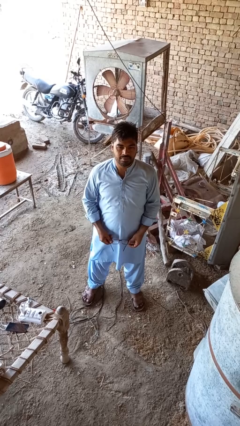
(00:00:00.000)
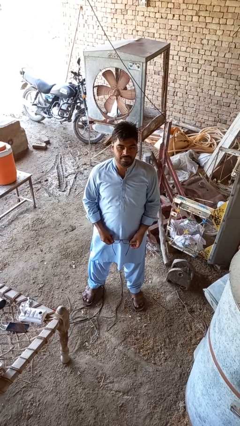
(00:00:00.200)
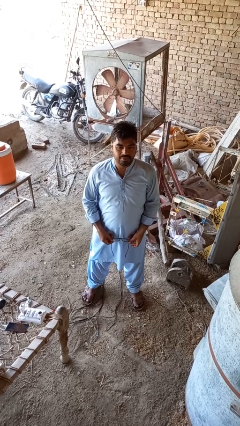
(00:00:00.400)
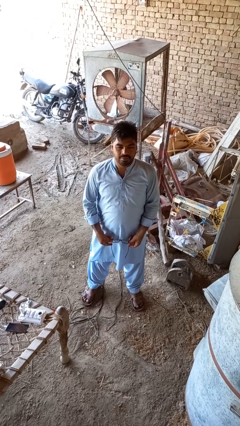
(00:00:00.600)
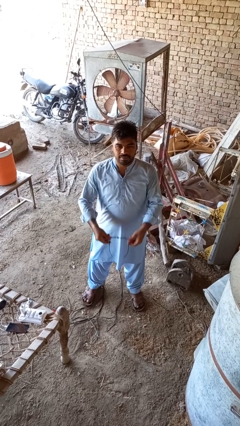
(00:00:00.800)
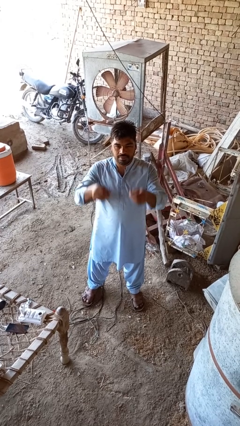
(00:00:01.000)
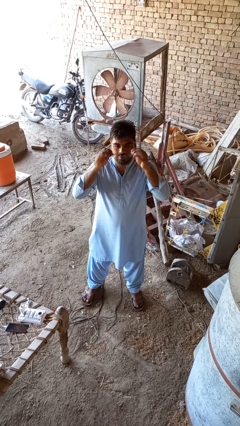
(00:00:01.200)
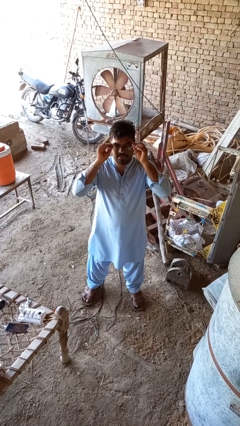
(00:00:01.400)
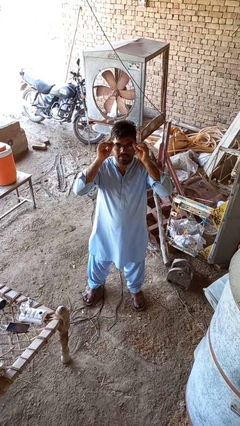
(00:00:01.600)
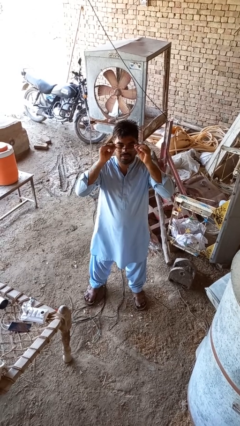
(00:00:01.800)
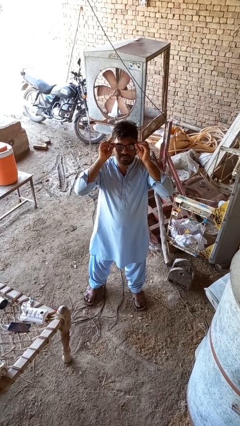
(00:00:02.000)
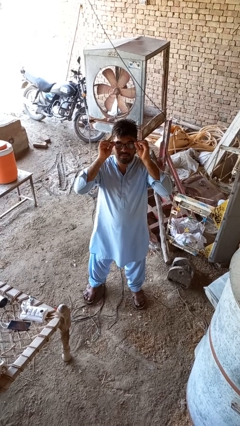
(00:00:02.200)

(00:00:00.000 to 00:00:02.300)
person puts on glasses

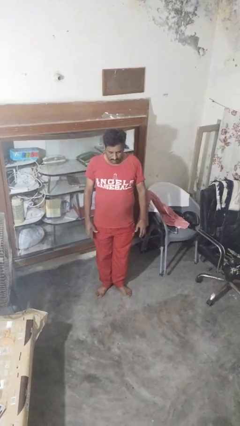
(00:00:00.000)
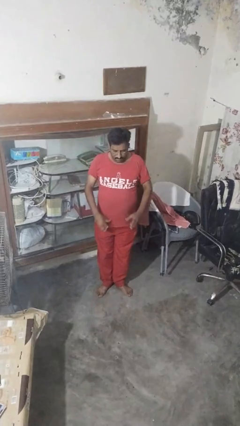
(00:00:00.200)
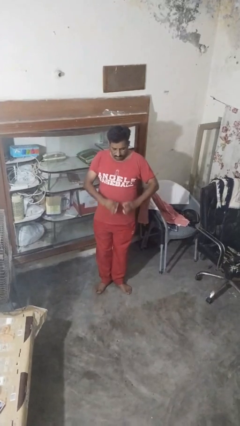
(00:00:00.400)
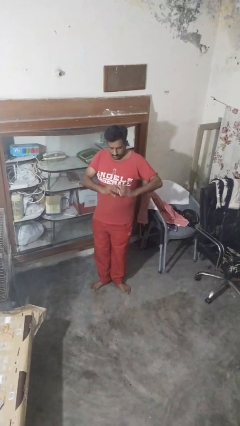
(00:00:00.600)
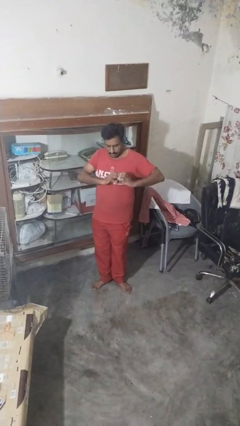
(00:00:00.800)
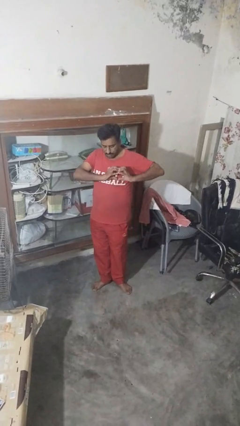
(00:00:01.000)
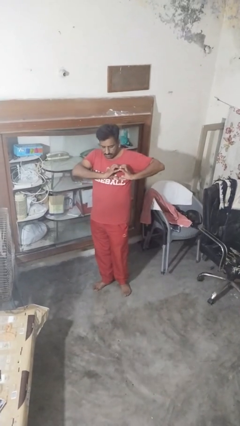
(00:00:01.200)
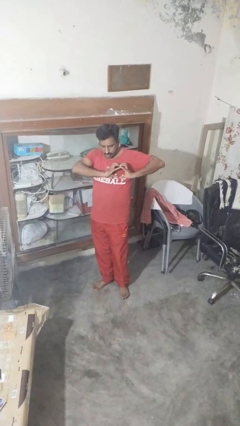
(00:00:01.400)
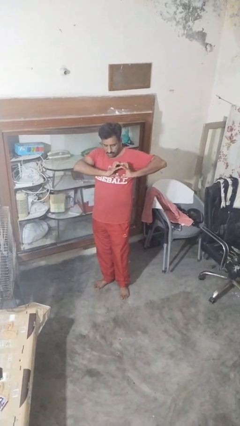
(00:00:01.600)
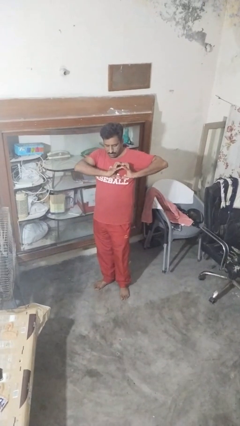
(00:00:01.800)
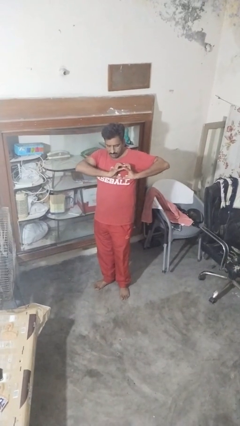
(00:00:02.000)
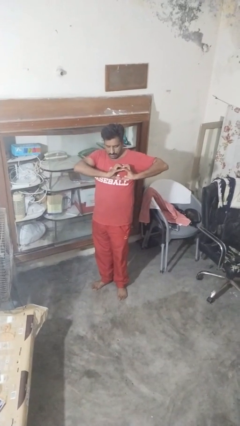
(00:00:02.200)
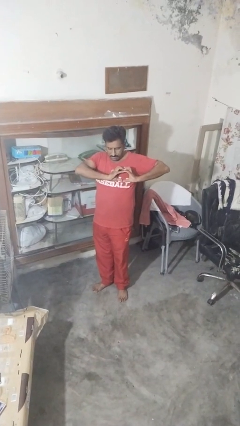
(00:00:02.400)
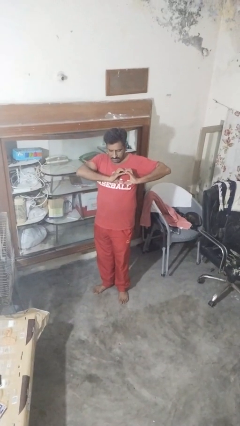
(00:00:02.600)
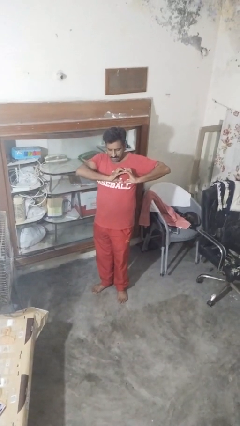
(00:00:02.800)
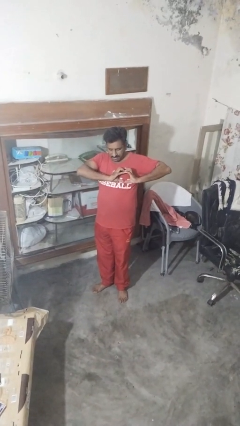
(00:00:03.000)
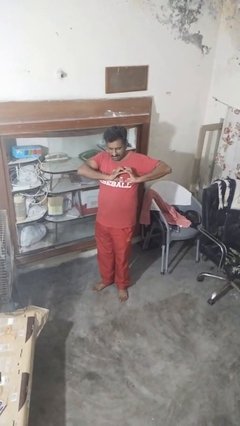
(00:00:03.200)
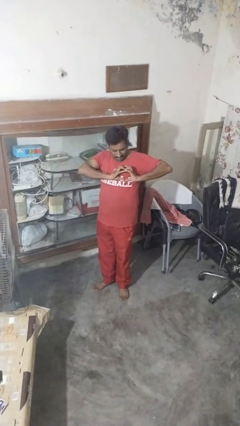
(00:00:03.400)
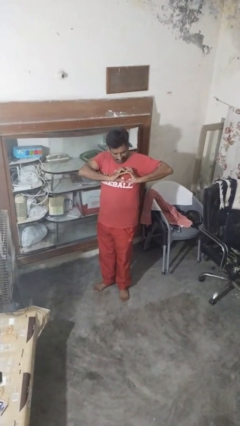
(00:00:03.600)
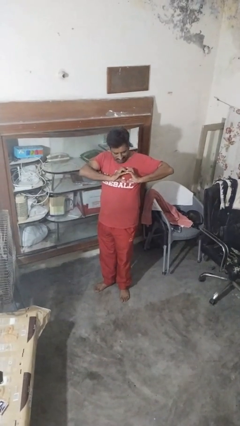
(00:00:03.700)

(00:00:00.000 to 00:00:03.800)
person gestures heart

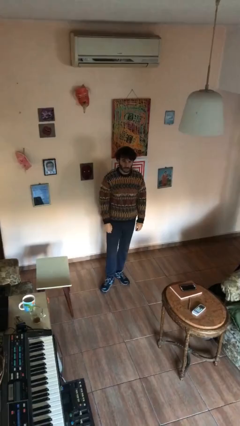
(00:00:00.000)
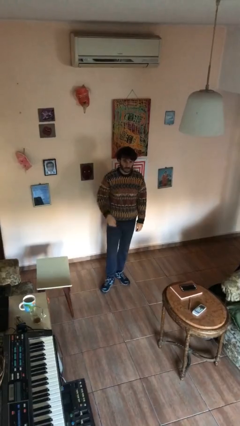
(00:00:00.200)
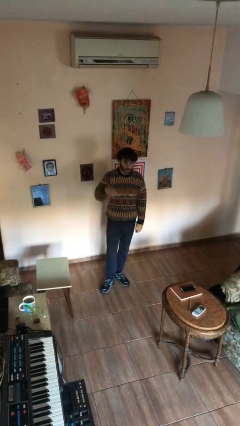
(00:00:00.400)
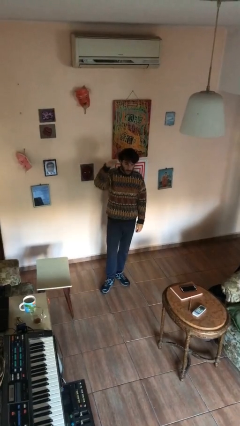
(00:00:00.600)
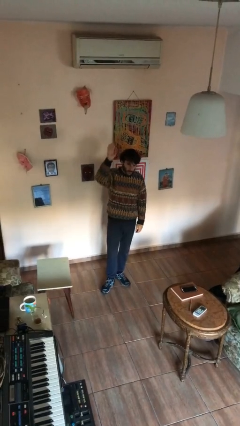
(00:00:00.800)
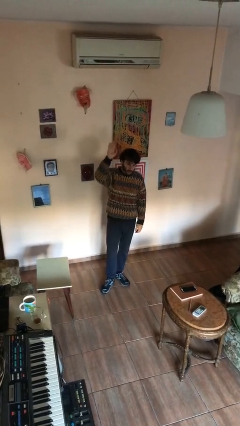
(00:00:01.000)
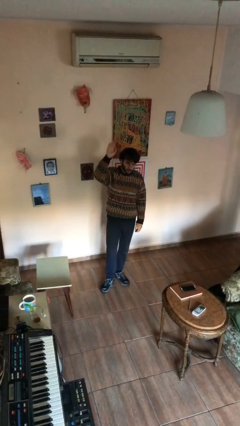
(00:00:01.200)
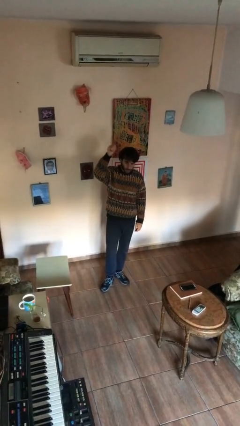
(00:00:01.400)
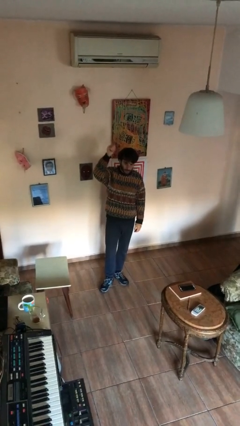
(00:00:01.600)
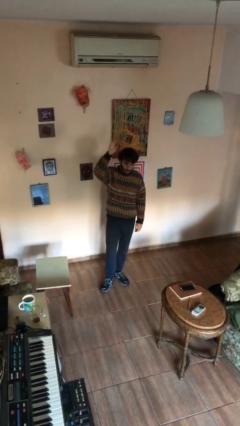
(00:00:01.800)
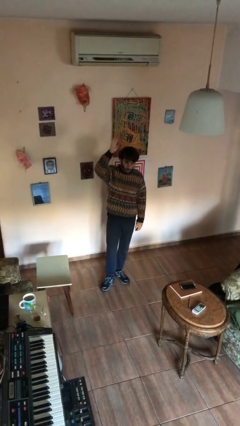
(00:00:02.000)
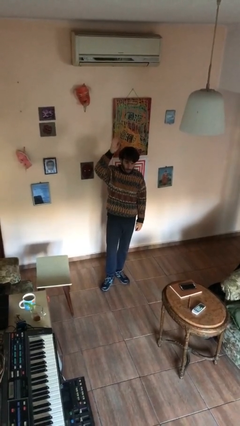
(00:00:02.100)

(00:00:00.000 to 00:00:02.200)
person gestures raise hand

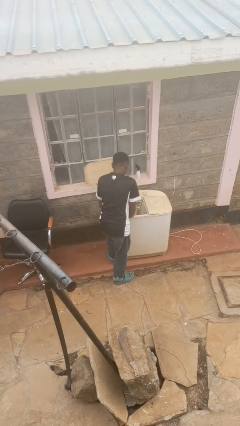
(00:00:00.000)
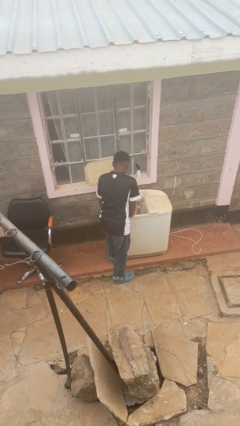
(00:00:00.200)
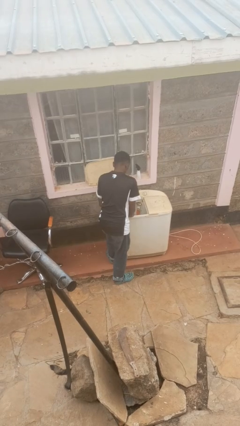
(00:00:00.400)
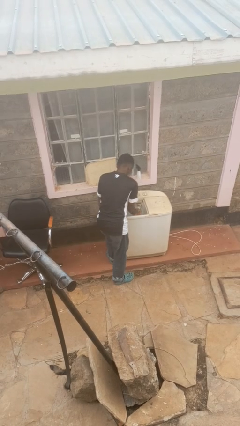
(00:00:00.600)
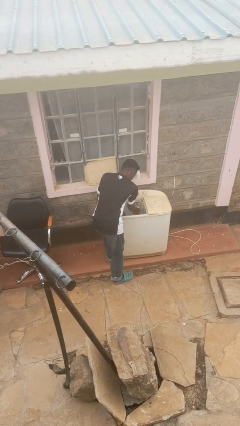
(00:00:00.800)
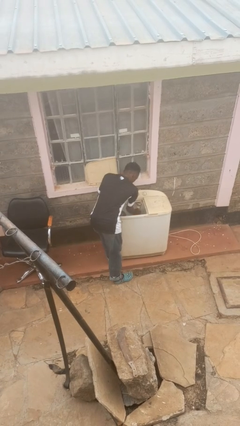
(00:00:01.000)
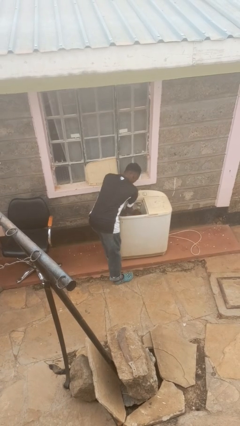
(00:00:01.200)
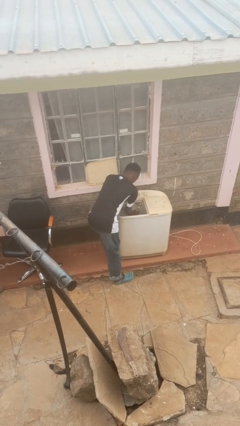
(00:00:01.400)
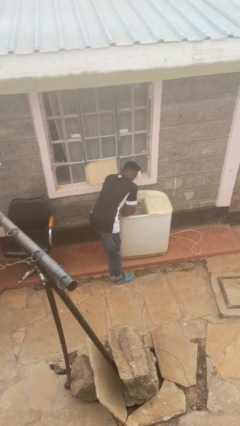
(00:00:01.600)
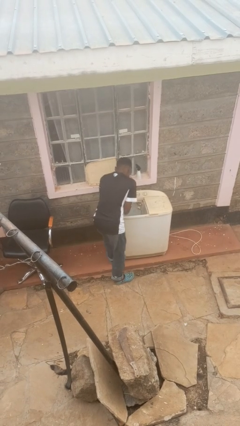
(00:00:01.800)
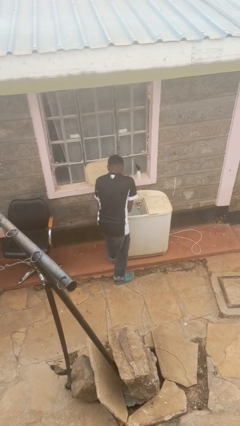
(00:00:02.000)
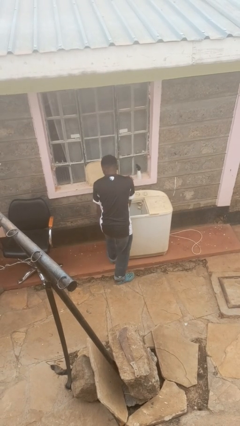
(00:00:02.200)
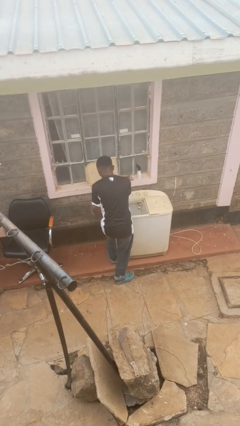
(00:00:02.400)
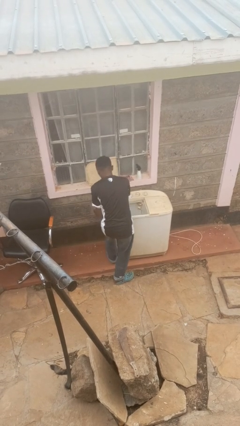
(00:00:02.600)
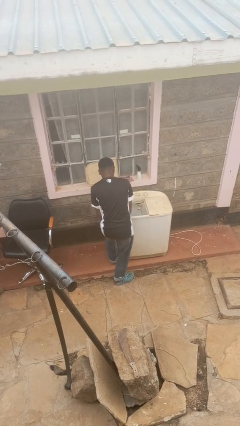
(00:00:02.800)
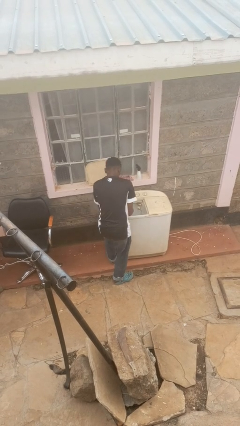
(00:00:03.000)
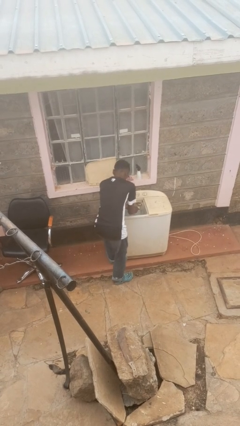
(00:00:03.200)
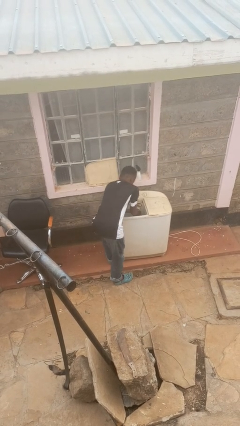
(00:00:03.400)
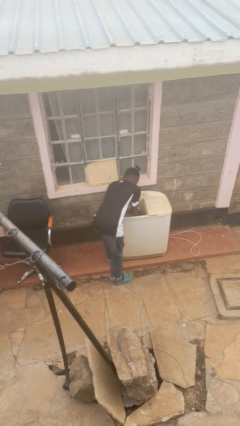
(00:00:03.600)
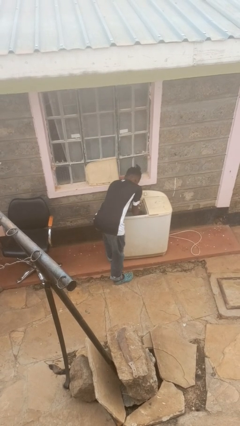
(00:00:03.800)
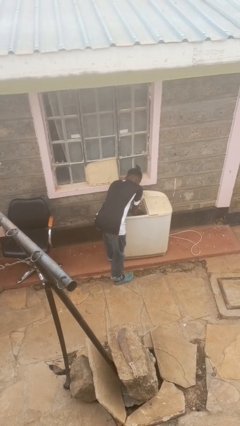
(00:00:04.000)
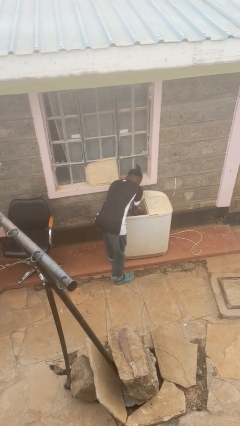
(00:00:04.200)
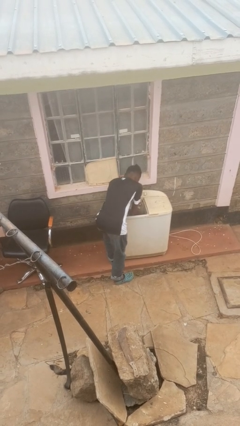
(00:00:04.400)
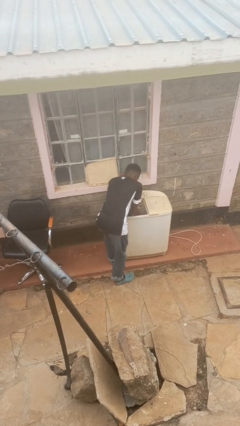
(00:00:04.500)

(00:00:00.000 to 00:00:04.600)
person cleans dryer lint trap

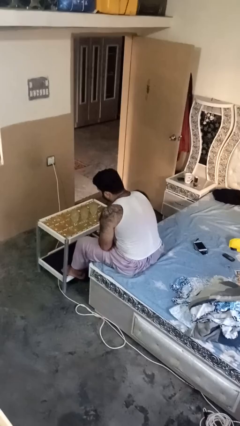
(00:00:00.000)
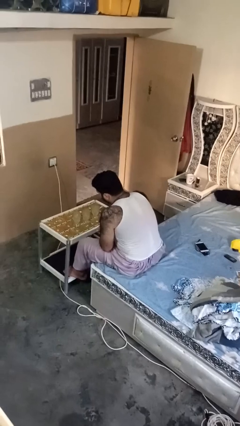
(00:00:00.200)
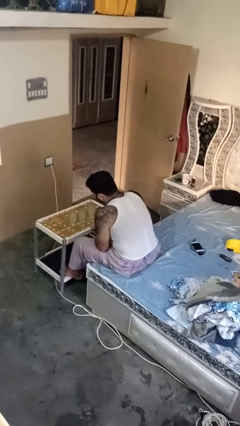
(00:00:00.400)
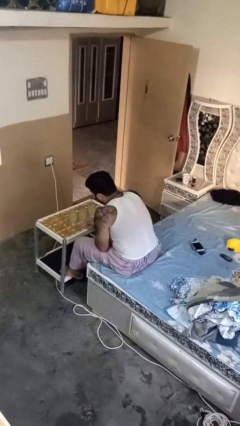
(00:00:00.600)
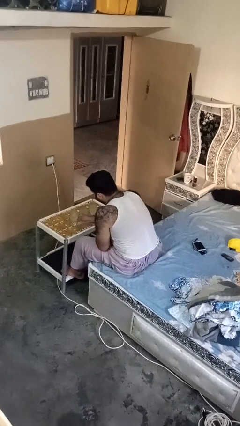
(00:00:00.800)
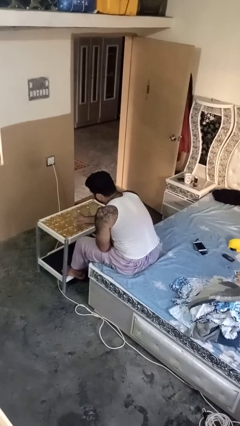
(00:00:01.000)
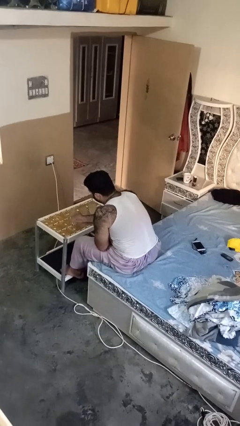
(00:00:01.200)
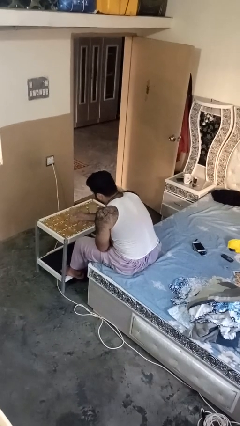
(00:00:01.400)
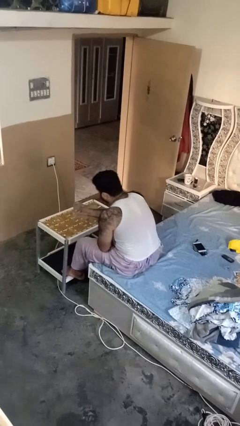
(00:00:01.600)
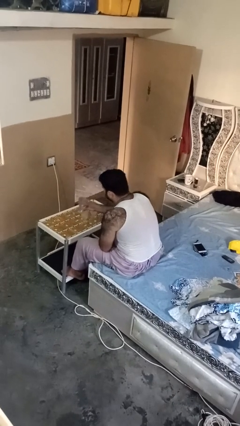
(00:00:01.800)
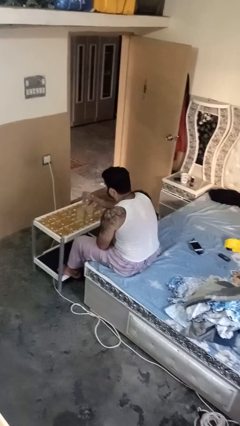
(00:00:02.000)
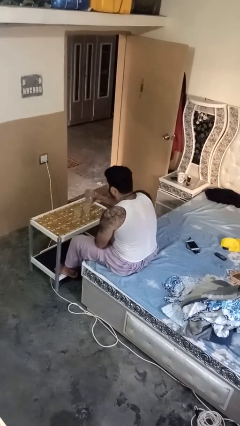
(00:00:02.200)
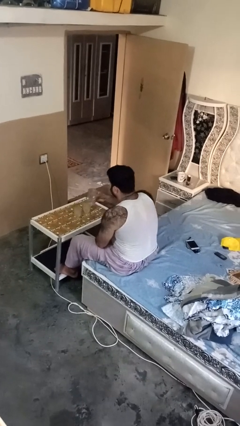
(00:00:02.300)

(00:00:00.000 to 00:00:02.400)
person picks up object from table

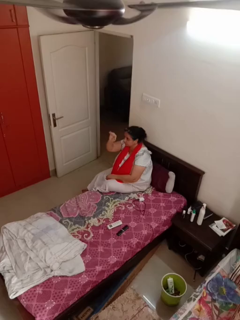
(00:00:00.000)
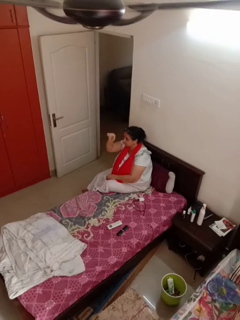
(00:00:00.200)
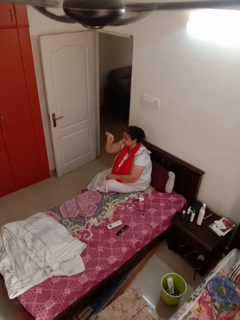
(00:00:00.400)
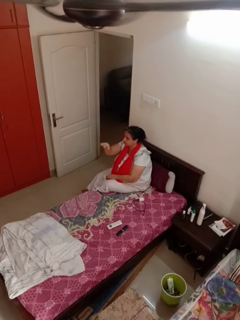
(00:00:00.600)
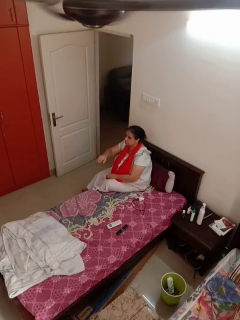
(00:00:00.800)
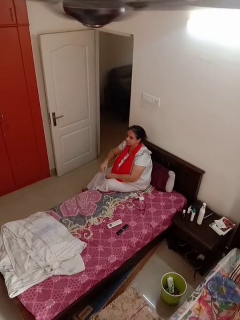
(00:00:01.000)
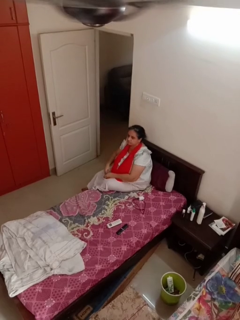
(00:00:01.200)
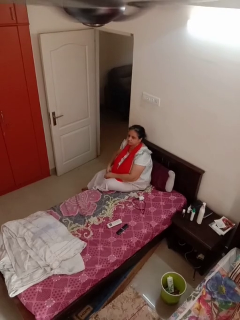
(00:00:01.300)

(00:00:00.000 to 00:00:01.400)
person gestures come here

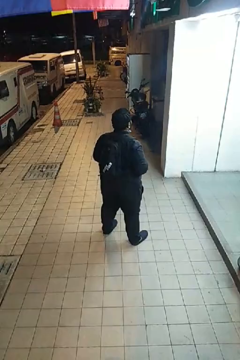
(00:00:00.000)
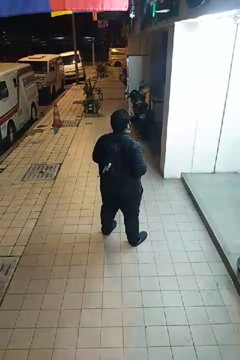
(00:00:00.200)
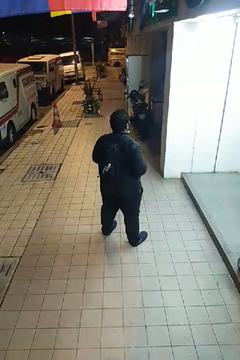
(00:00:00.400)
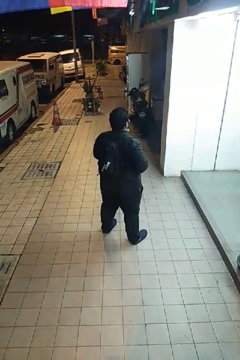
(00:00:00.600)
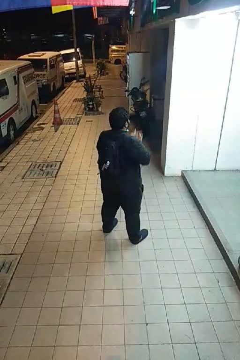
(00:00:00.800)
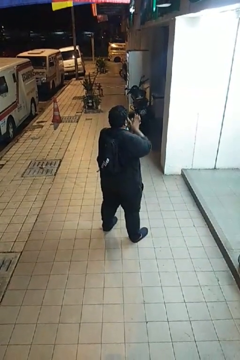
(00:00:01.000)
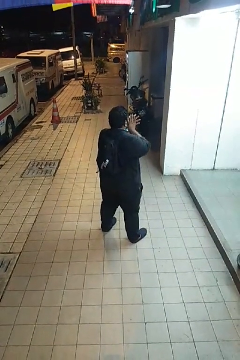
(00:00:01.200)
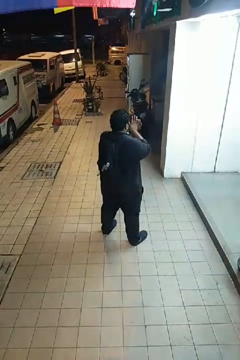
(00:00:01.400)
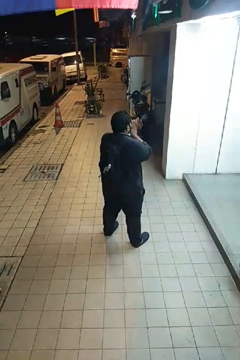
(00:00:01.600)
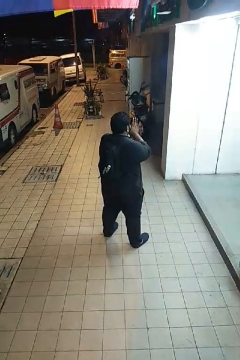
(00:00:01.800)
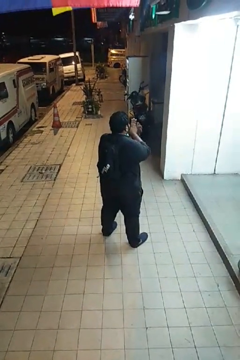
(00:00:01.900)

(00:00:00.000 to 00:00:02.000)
person blows into hands
